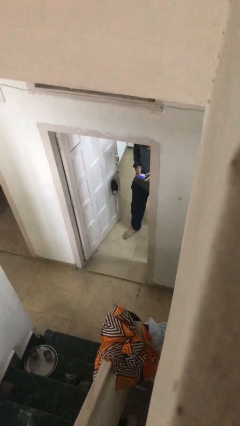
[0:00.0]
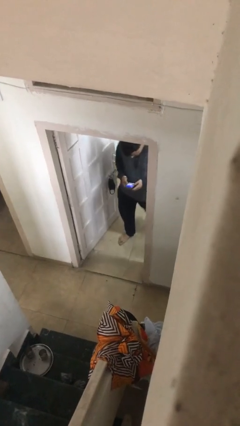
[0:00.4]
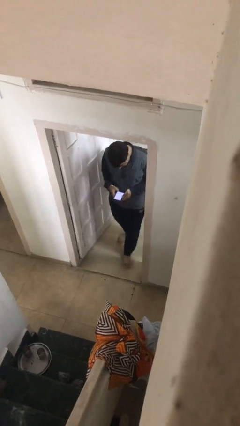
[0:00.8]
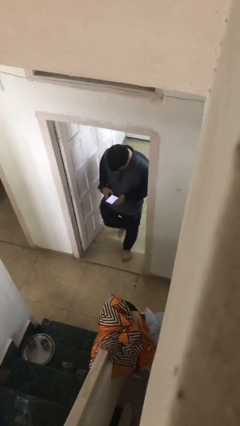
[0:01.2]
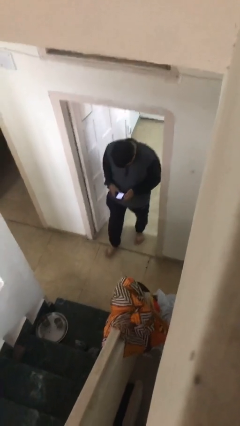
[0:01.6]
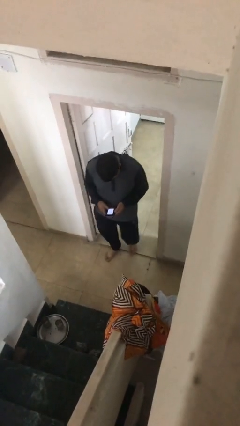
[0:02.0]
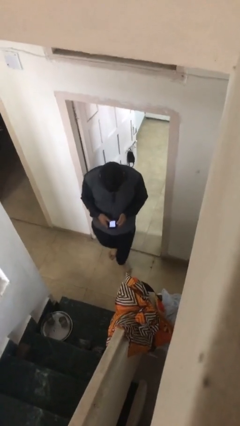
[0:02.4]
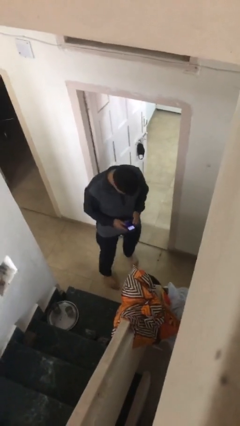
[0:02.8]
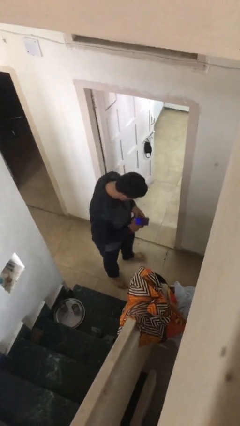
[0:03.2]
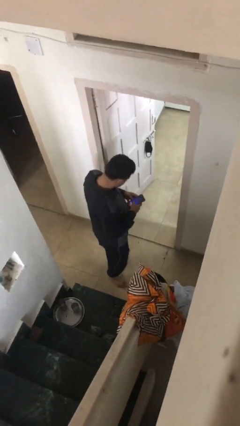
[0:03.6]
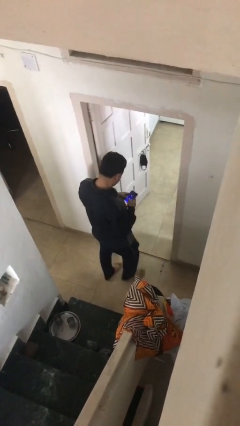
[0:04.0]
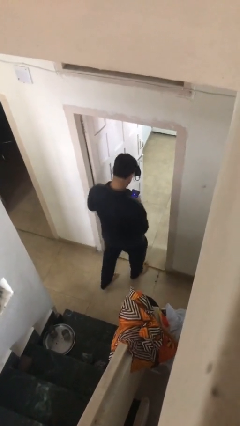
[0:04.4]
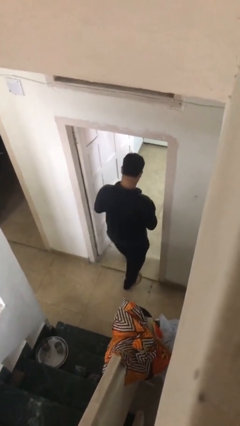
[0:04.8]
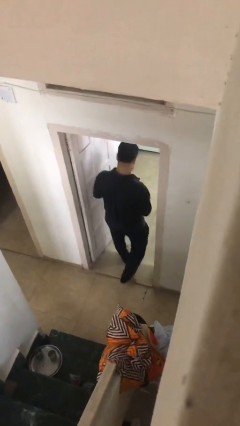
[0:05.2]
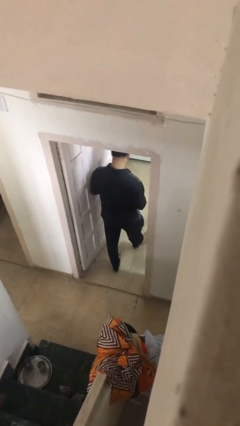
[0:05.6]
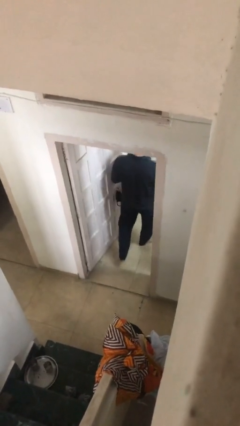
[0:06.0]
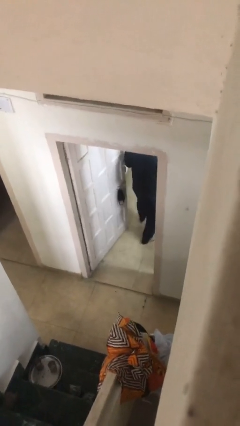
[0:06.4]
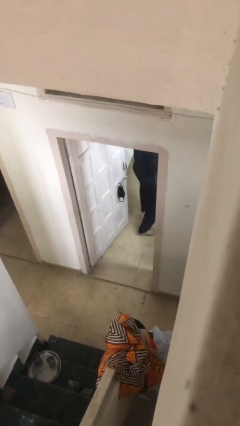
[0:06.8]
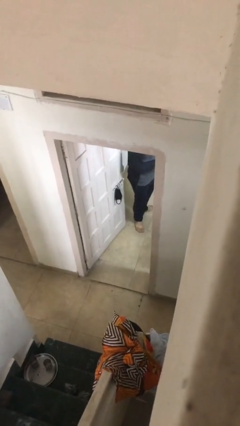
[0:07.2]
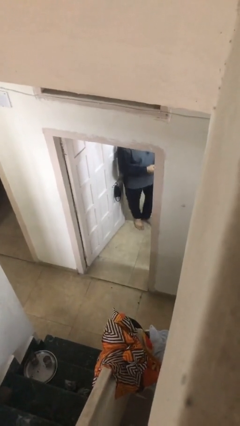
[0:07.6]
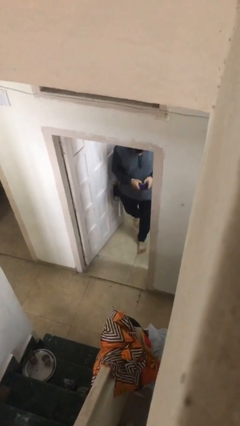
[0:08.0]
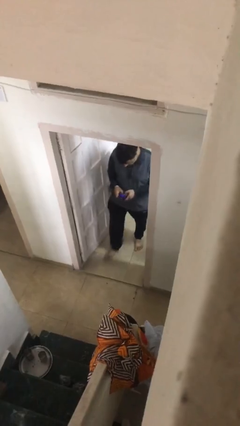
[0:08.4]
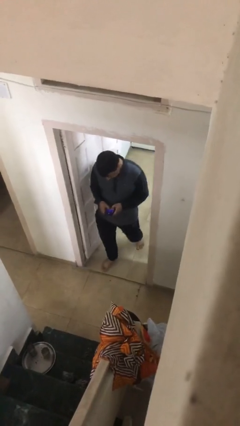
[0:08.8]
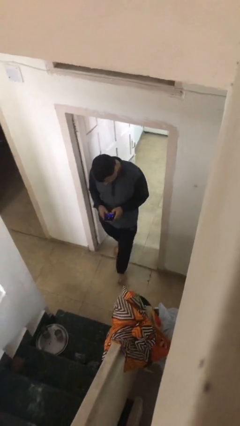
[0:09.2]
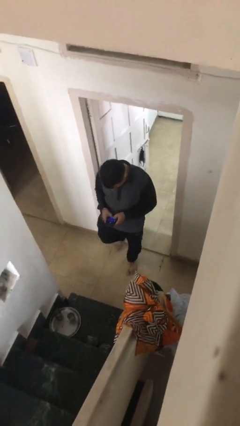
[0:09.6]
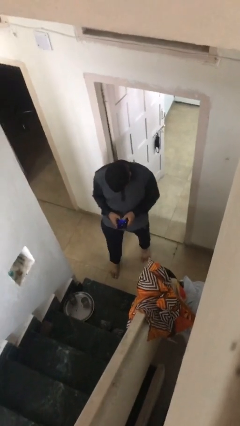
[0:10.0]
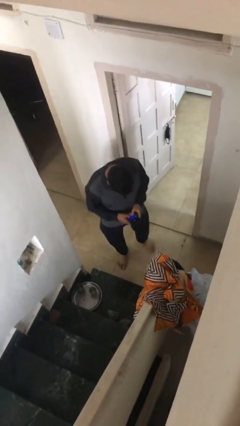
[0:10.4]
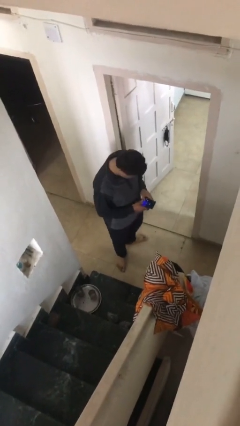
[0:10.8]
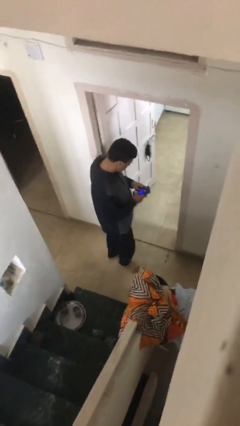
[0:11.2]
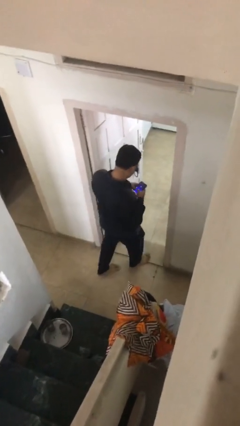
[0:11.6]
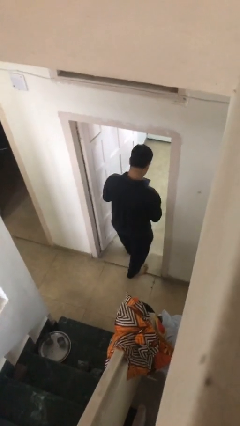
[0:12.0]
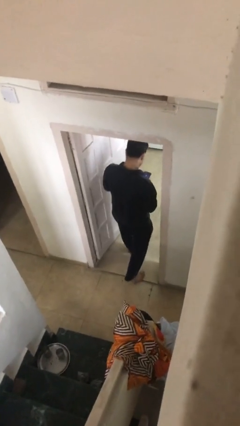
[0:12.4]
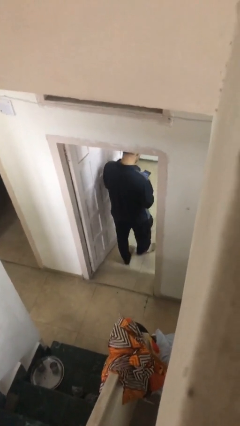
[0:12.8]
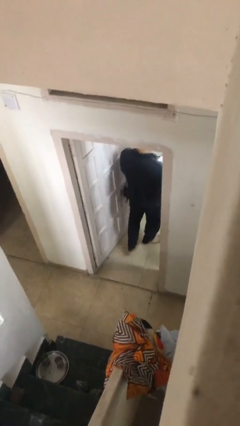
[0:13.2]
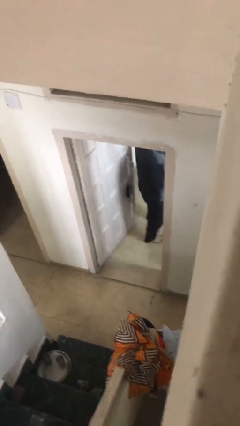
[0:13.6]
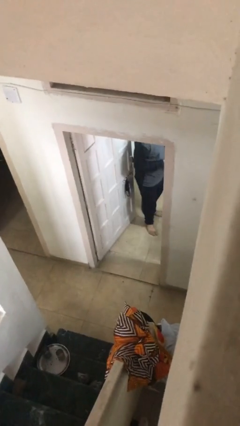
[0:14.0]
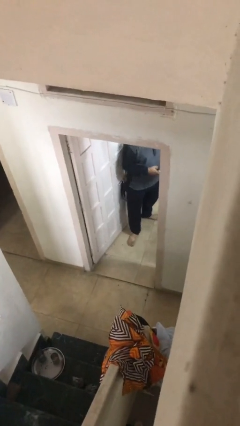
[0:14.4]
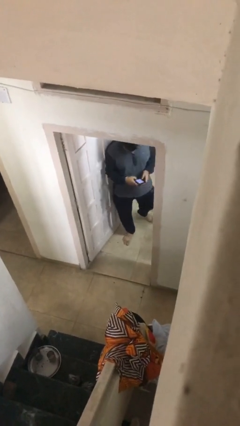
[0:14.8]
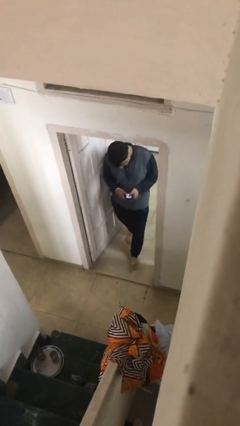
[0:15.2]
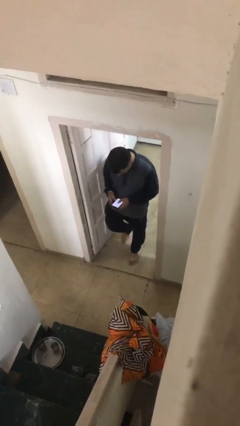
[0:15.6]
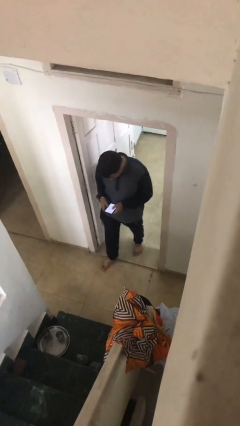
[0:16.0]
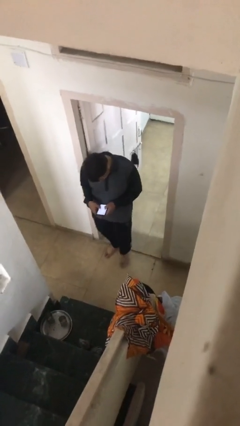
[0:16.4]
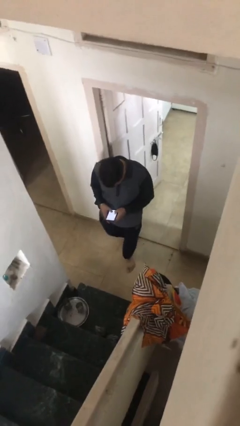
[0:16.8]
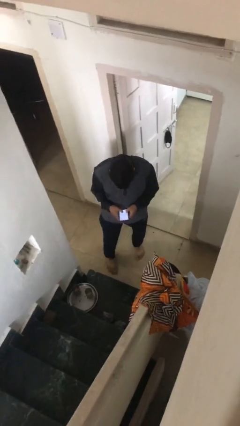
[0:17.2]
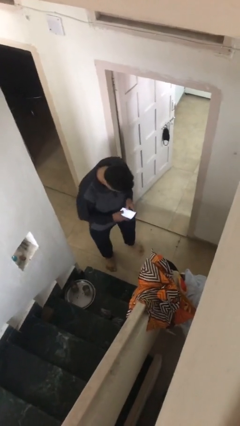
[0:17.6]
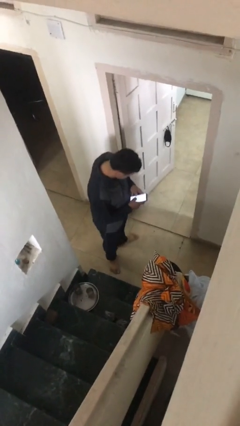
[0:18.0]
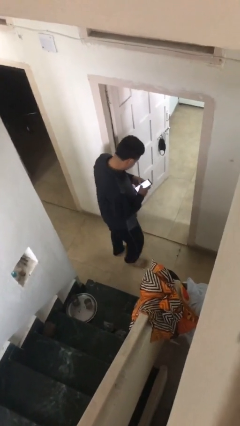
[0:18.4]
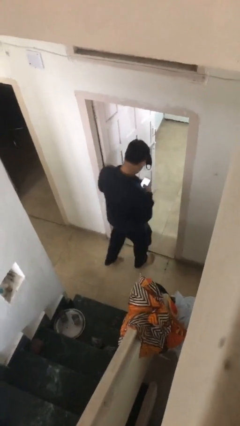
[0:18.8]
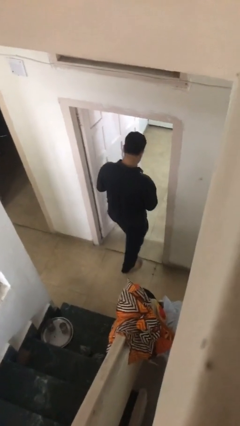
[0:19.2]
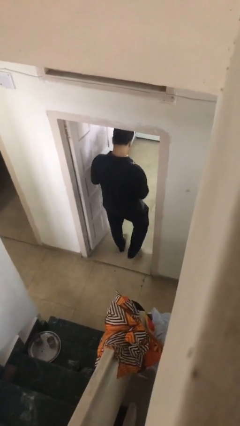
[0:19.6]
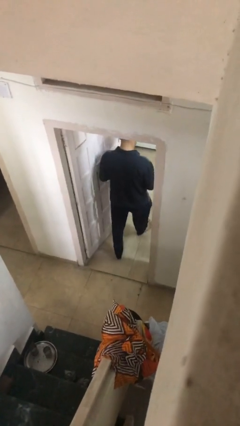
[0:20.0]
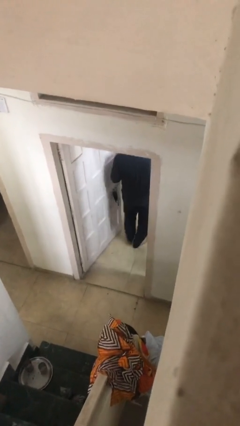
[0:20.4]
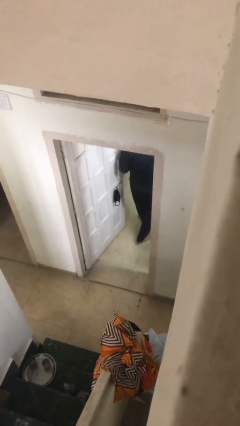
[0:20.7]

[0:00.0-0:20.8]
person texts on phone

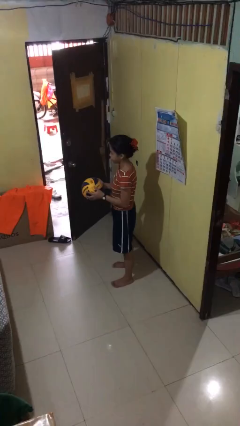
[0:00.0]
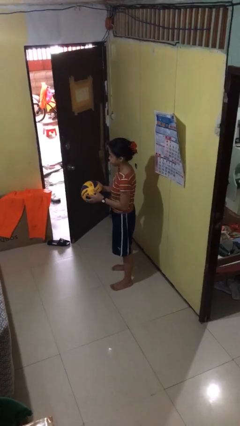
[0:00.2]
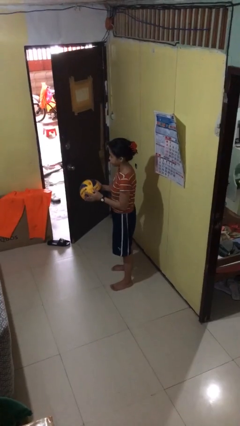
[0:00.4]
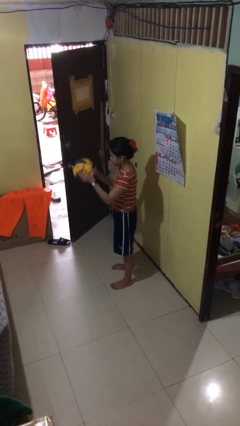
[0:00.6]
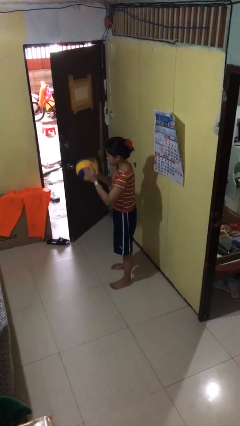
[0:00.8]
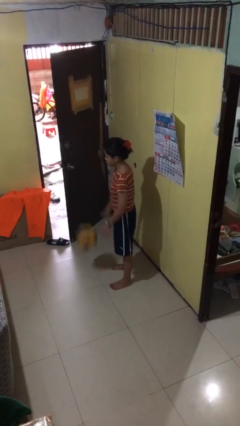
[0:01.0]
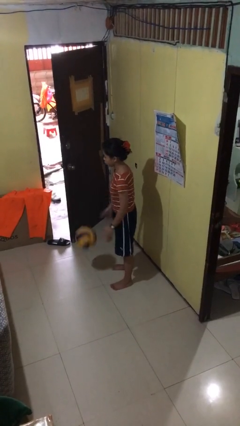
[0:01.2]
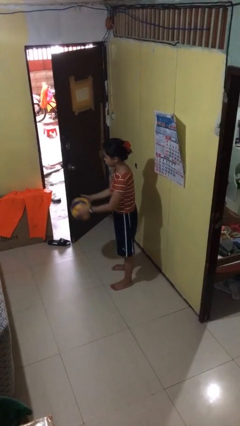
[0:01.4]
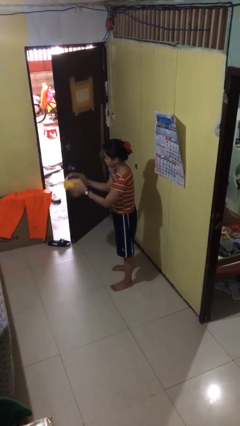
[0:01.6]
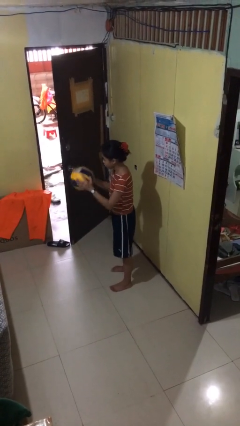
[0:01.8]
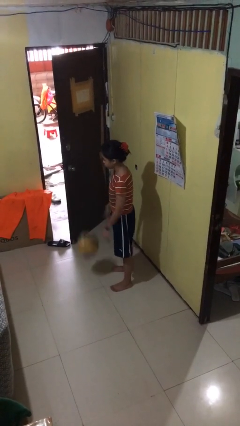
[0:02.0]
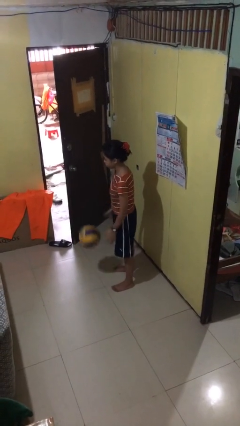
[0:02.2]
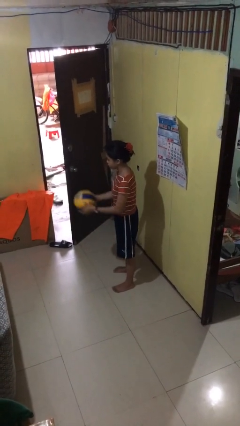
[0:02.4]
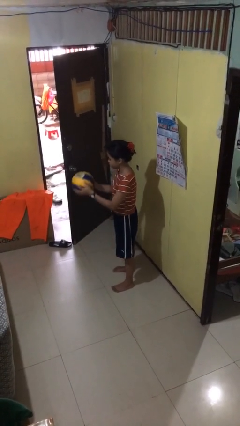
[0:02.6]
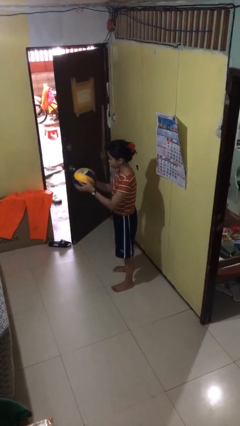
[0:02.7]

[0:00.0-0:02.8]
person bounces ball on floor

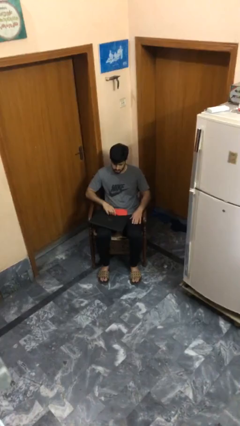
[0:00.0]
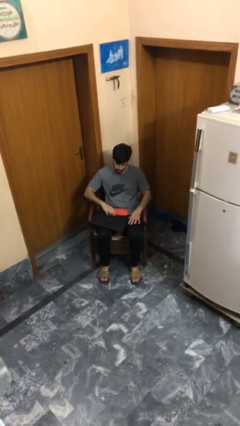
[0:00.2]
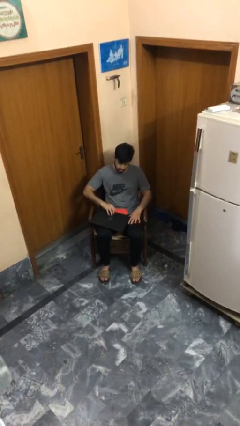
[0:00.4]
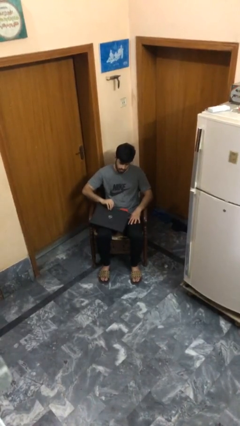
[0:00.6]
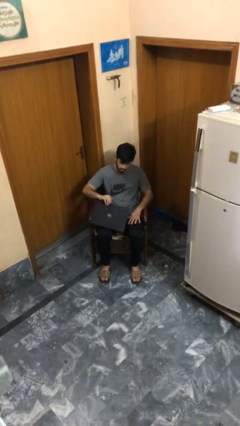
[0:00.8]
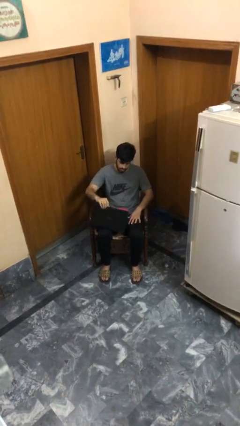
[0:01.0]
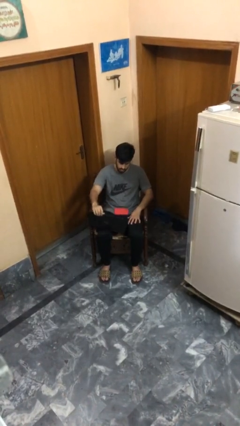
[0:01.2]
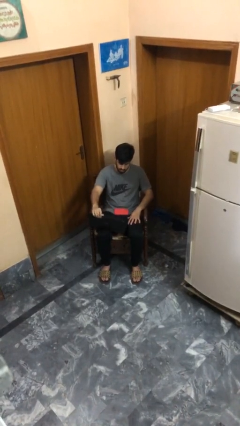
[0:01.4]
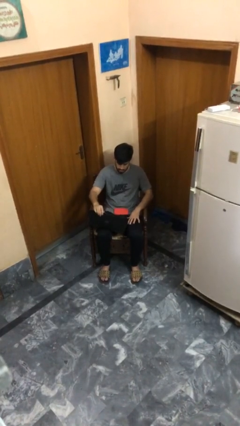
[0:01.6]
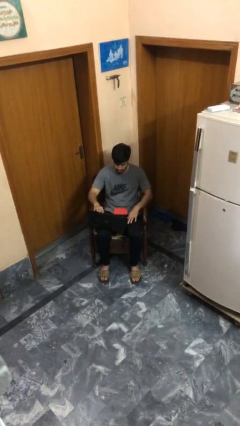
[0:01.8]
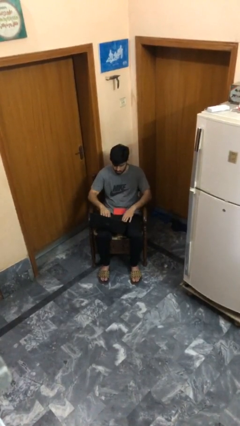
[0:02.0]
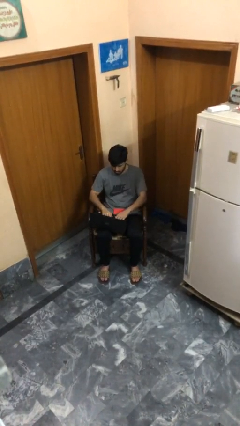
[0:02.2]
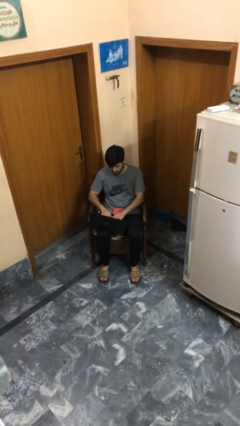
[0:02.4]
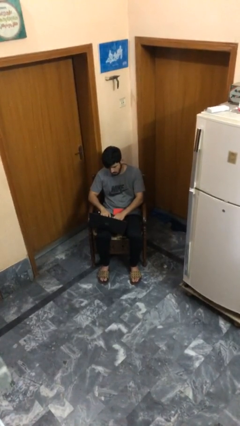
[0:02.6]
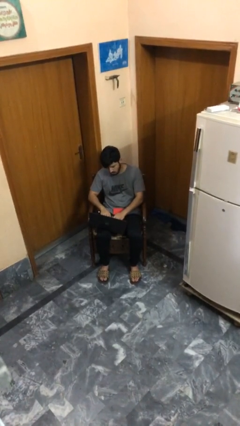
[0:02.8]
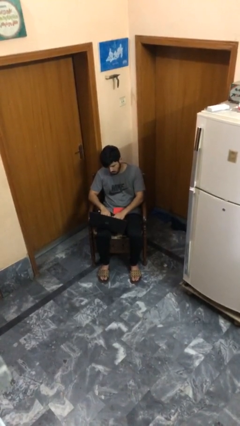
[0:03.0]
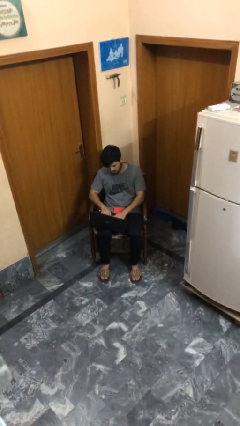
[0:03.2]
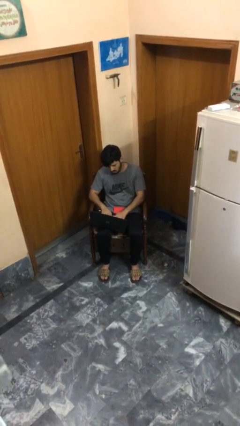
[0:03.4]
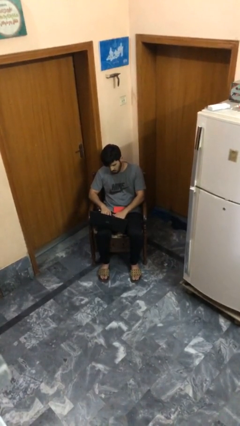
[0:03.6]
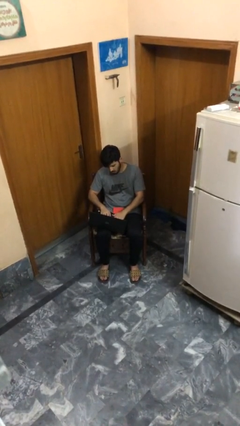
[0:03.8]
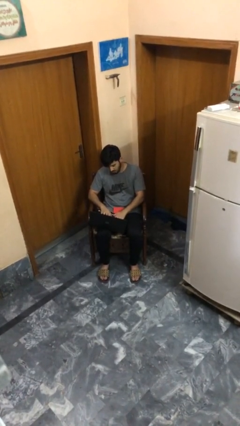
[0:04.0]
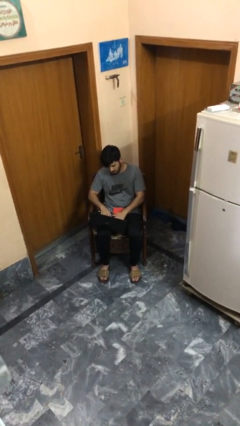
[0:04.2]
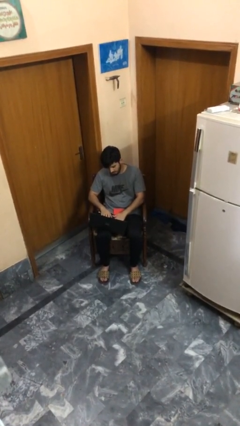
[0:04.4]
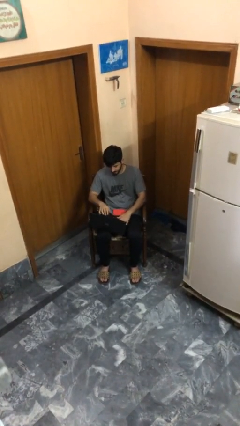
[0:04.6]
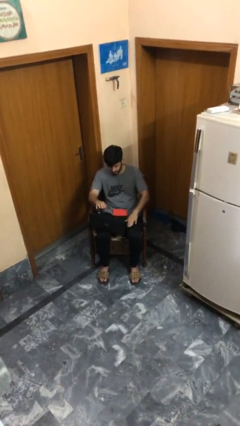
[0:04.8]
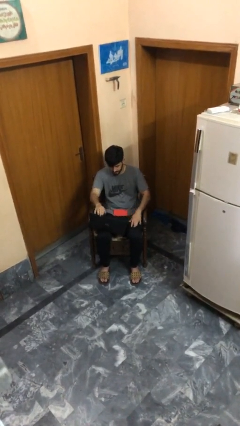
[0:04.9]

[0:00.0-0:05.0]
person opens laptop
